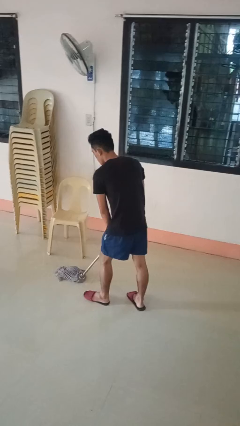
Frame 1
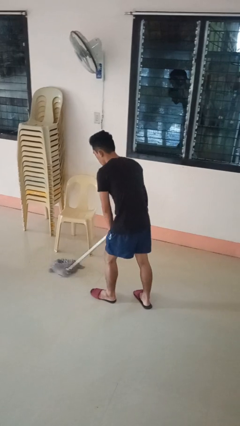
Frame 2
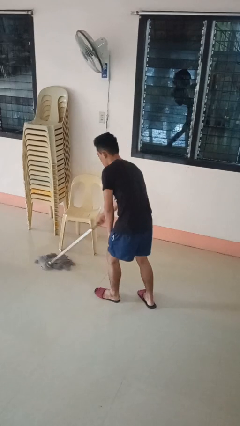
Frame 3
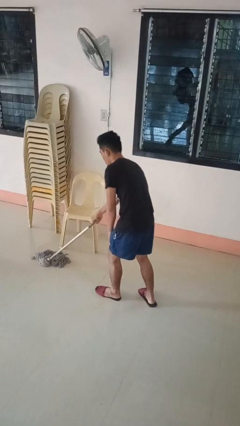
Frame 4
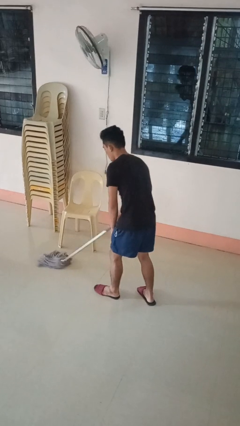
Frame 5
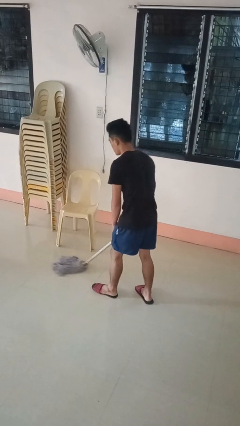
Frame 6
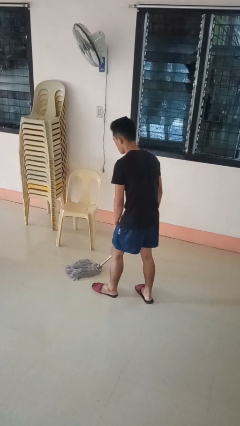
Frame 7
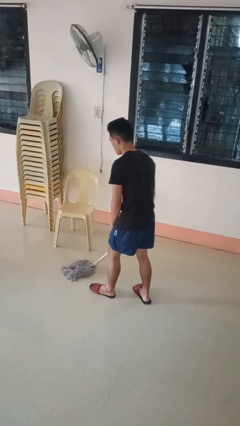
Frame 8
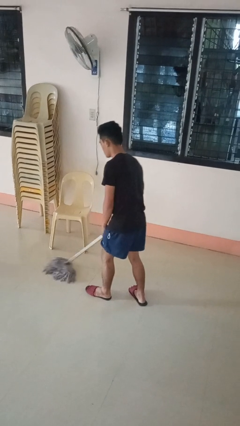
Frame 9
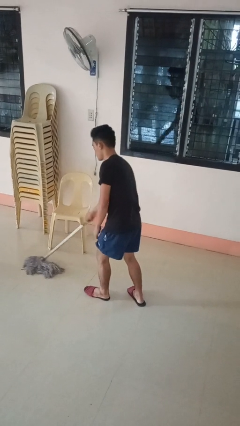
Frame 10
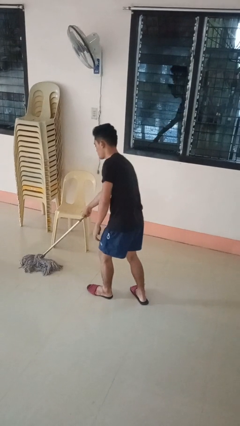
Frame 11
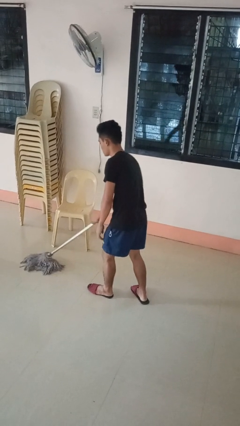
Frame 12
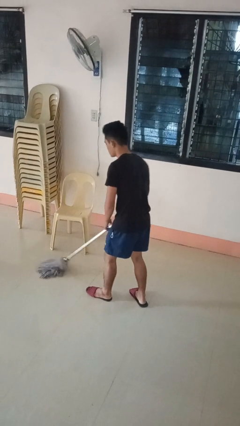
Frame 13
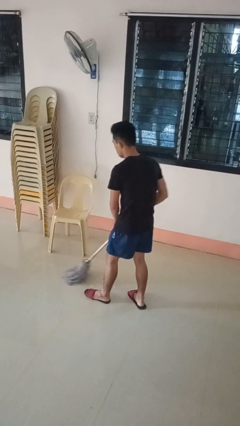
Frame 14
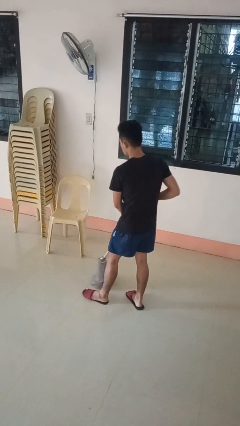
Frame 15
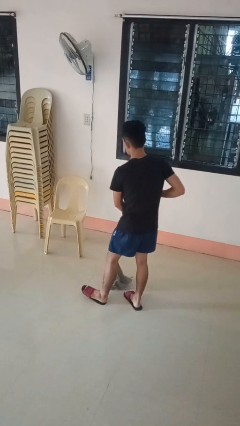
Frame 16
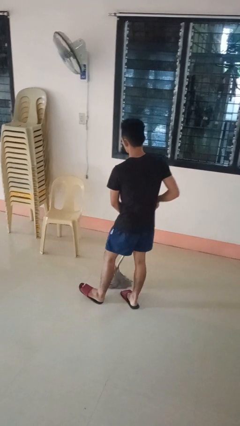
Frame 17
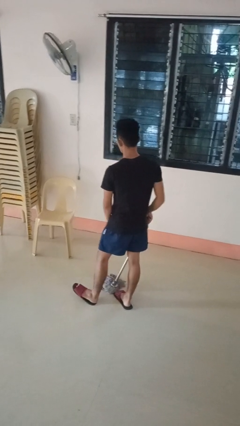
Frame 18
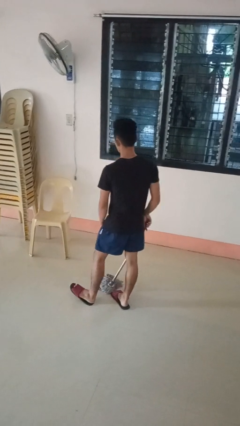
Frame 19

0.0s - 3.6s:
person mops

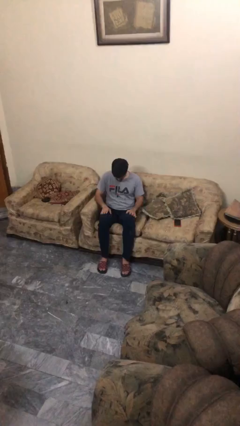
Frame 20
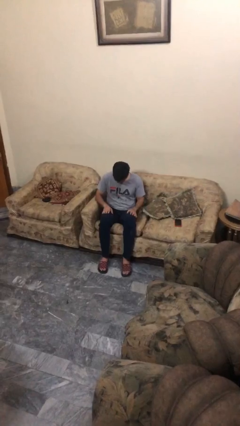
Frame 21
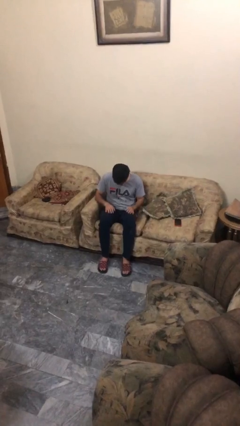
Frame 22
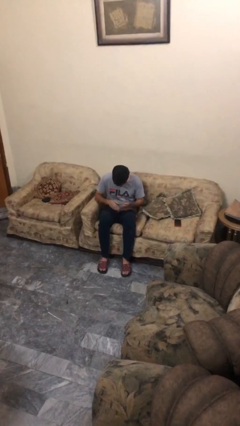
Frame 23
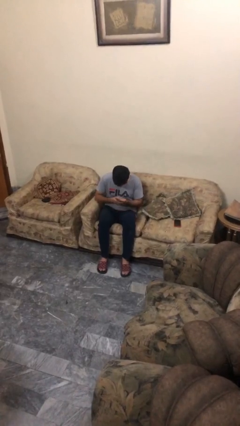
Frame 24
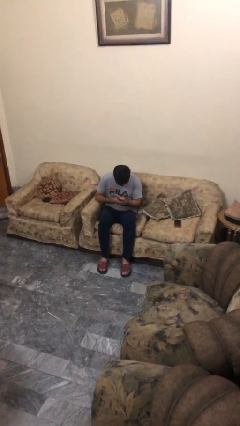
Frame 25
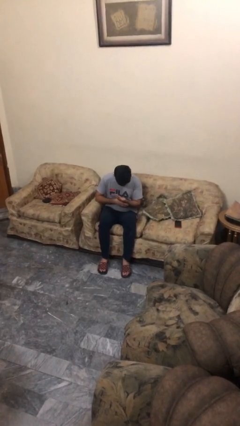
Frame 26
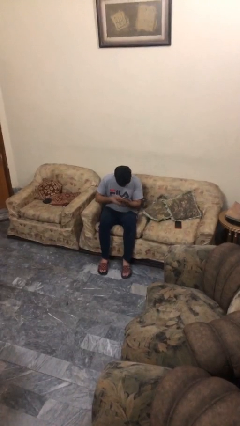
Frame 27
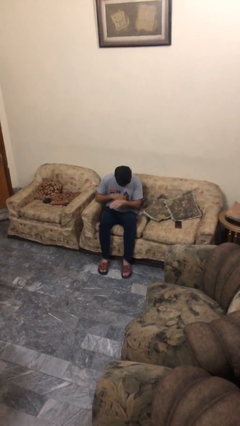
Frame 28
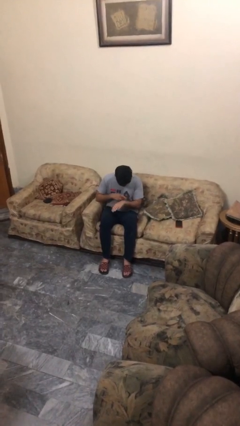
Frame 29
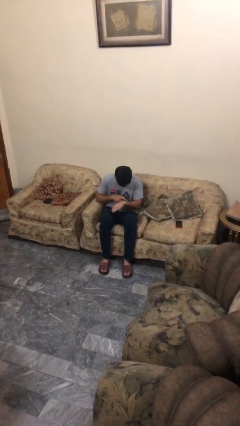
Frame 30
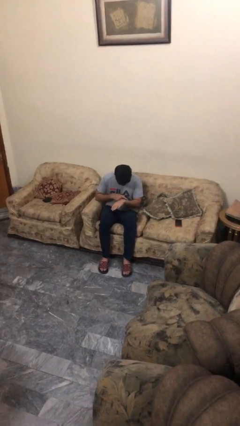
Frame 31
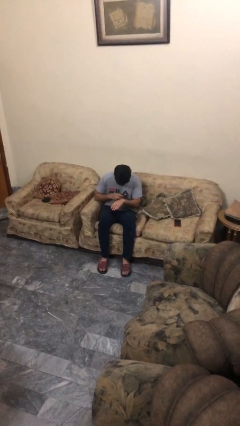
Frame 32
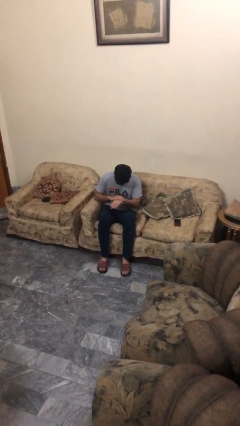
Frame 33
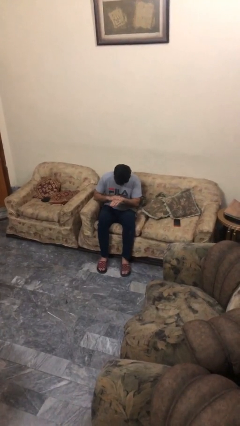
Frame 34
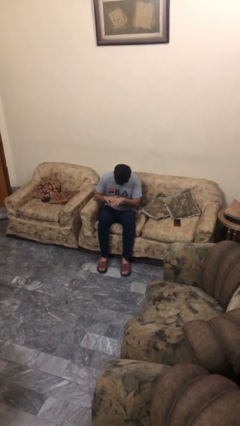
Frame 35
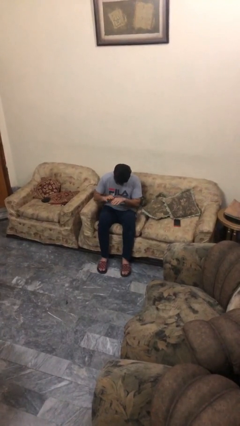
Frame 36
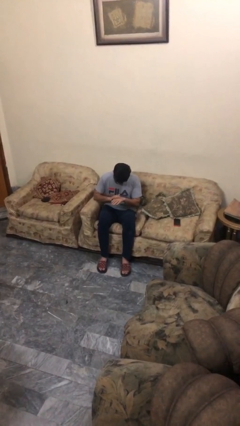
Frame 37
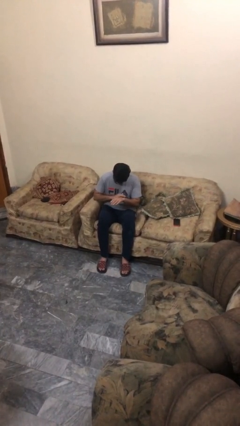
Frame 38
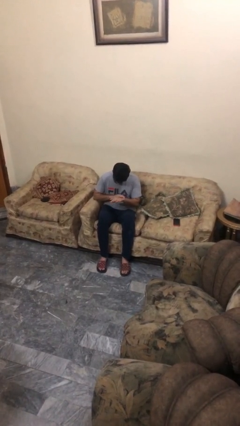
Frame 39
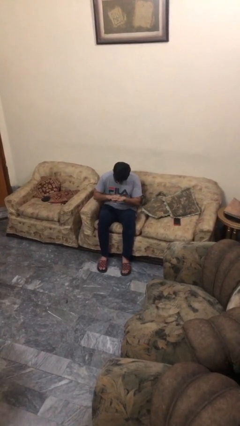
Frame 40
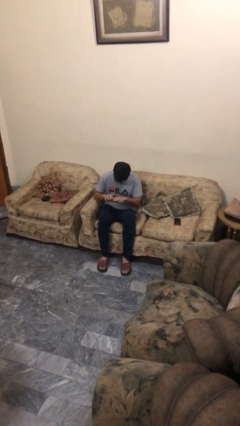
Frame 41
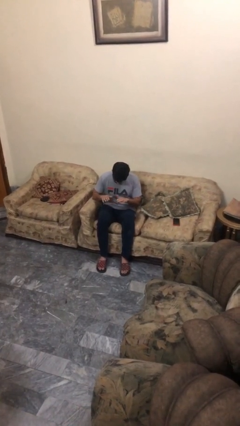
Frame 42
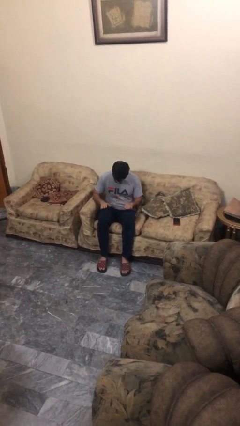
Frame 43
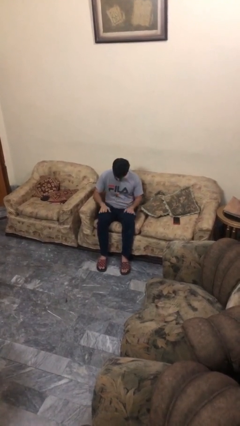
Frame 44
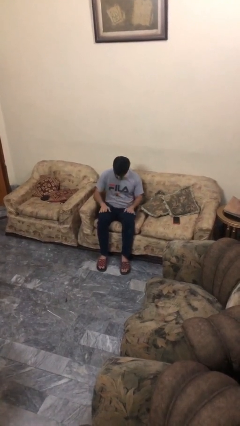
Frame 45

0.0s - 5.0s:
person looks at hands in lap

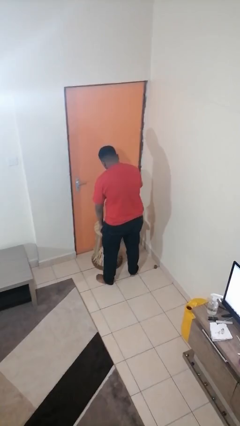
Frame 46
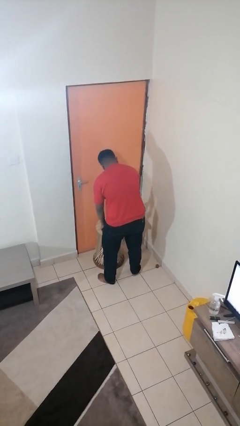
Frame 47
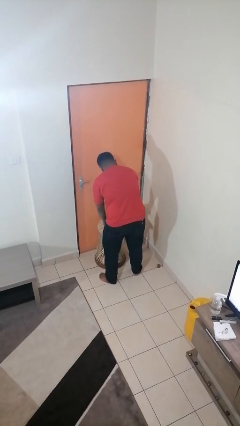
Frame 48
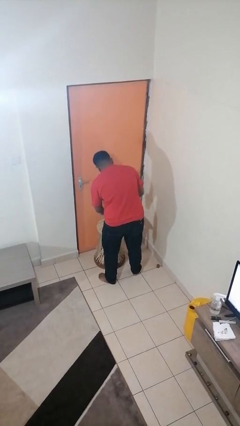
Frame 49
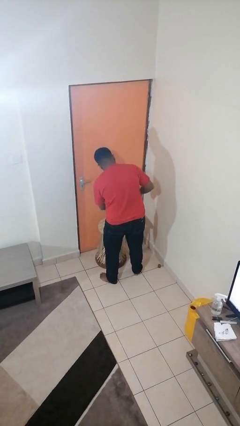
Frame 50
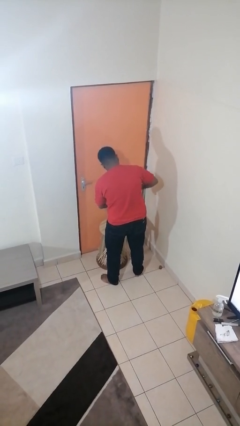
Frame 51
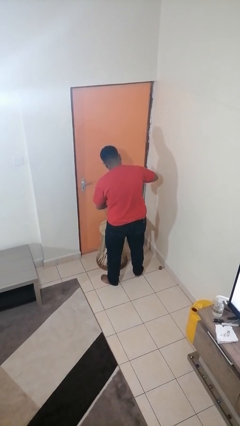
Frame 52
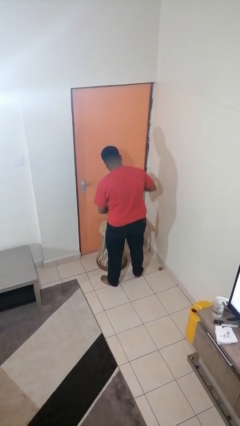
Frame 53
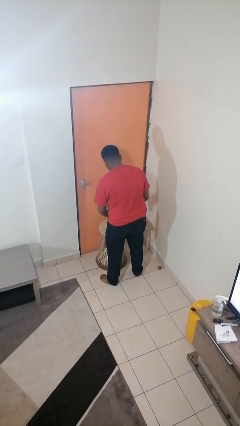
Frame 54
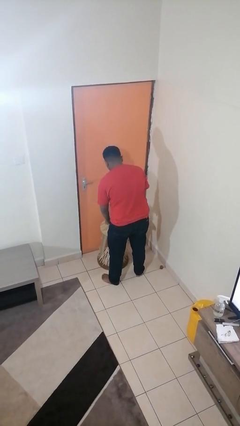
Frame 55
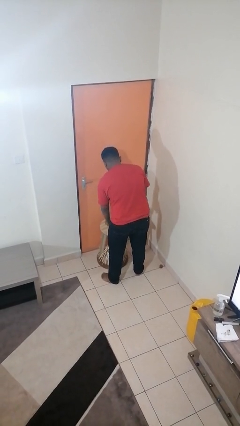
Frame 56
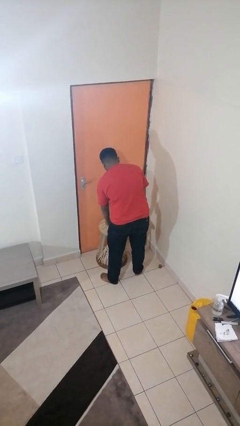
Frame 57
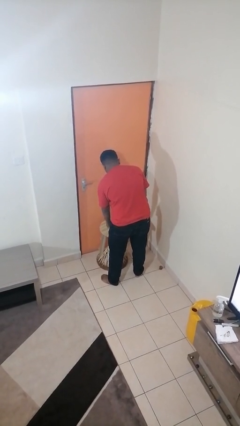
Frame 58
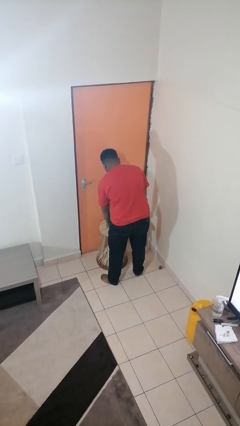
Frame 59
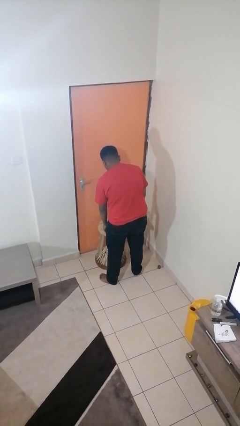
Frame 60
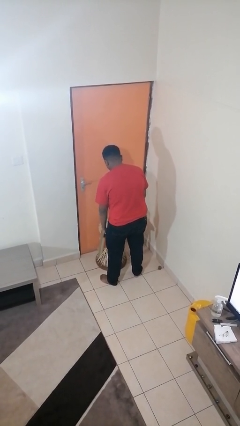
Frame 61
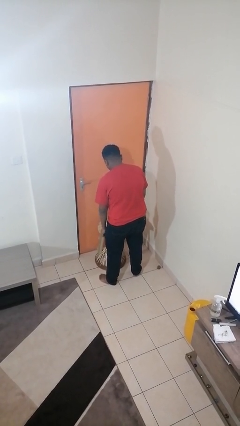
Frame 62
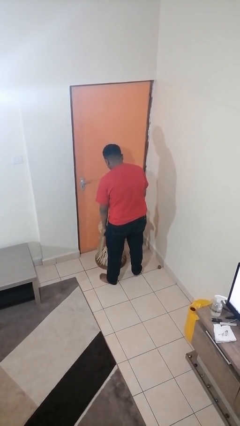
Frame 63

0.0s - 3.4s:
person opens jar

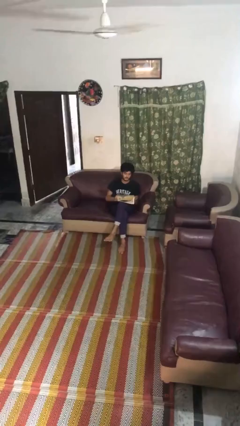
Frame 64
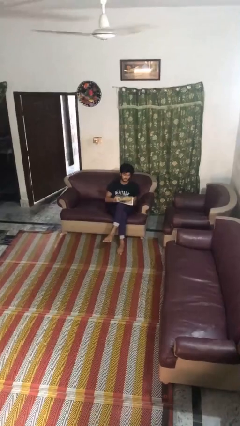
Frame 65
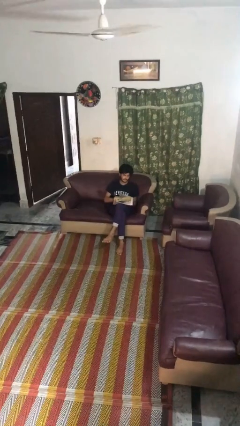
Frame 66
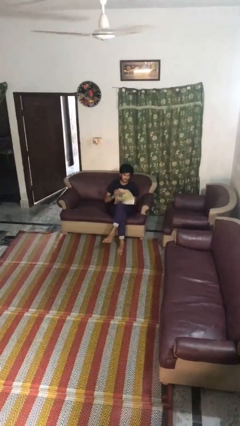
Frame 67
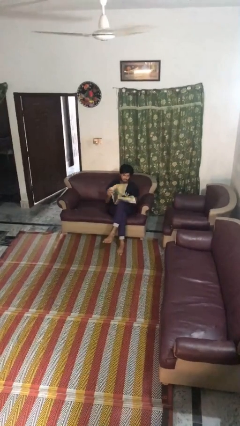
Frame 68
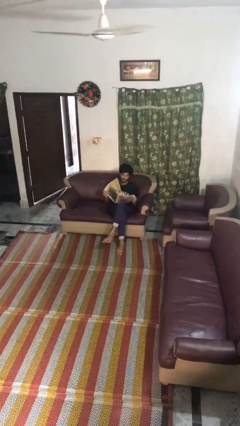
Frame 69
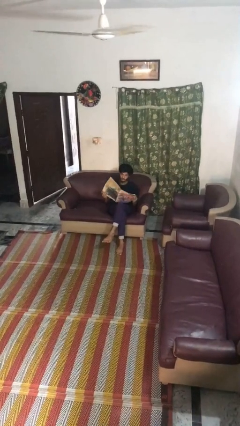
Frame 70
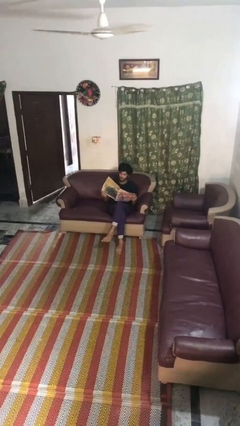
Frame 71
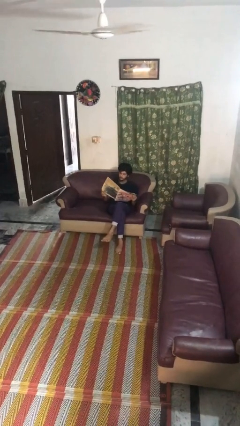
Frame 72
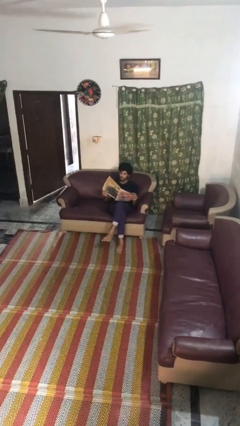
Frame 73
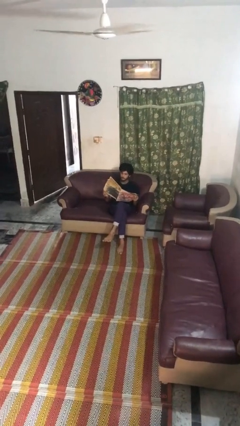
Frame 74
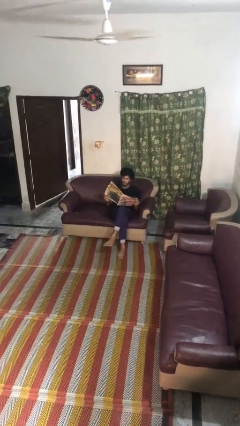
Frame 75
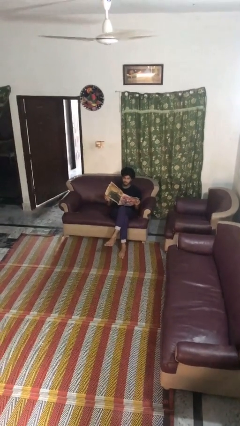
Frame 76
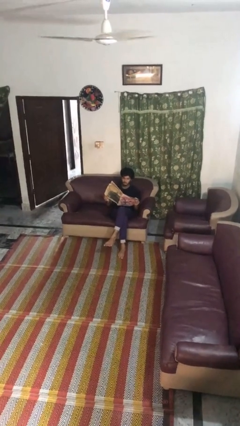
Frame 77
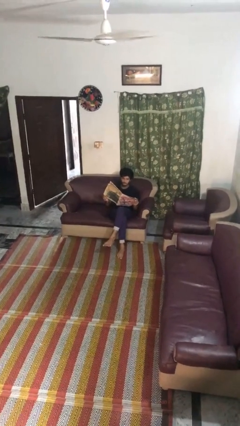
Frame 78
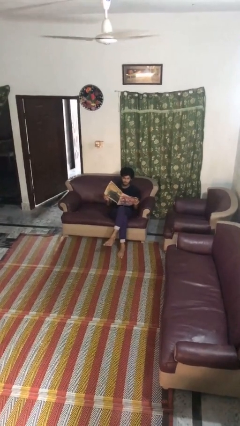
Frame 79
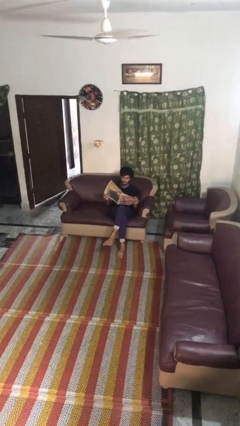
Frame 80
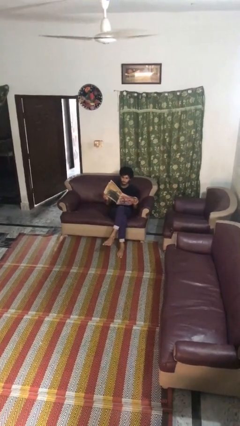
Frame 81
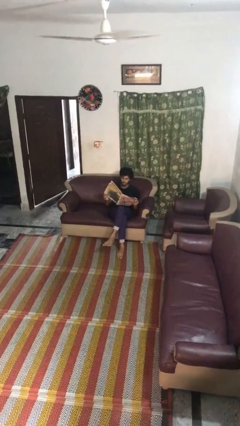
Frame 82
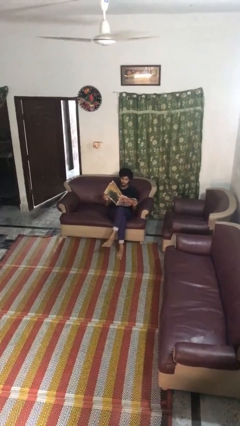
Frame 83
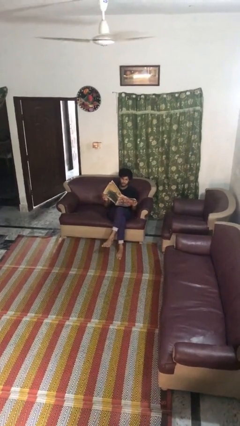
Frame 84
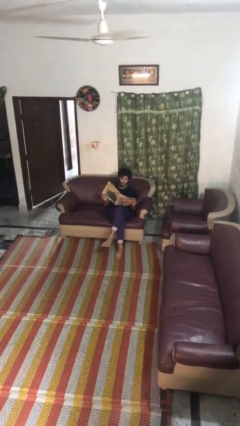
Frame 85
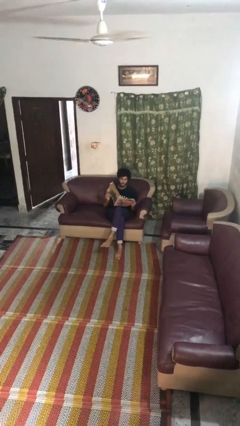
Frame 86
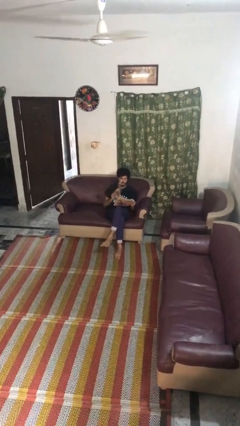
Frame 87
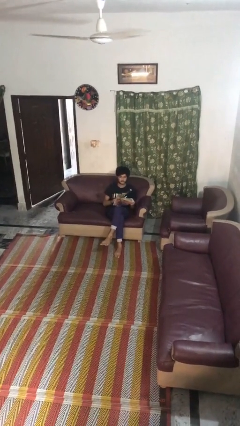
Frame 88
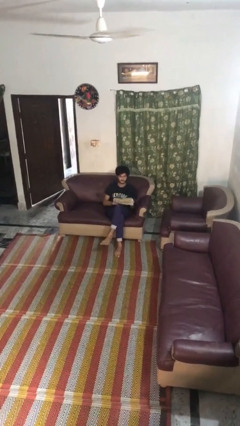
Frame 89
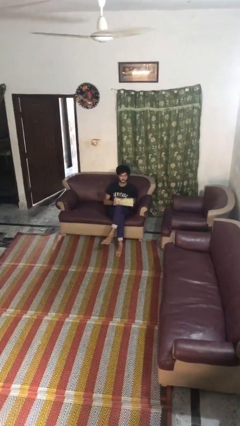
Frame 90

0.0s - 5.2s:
person reads magazine
